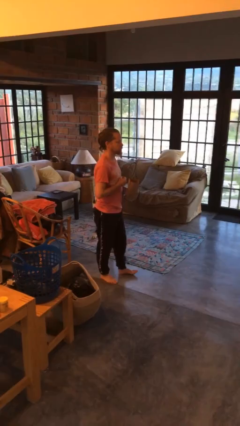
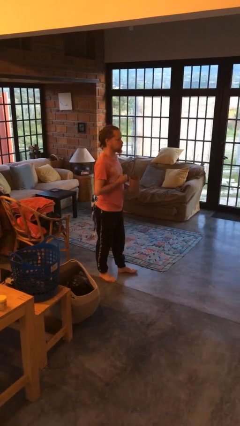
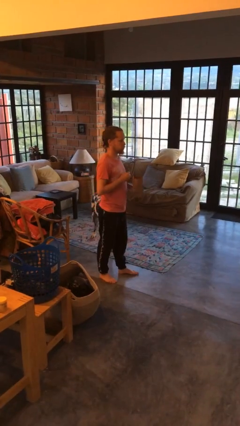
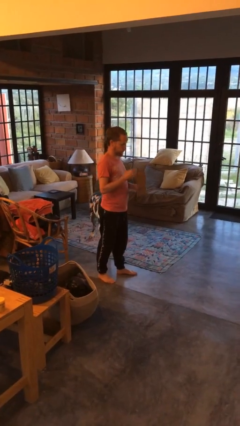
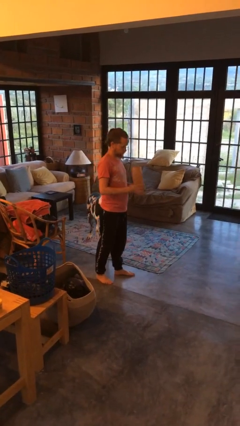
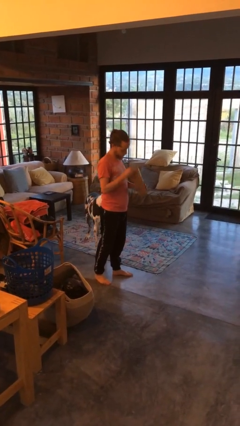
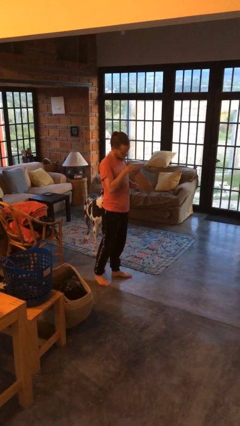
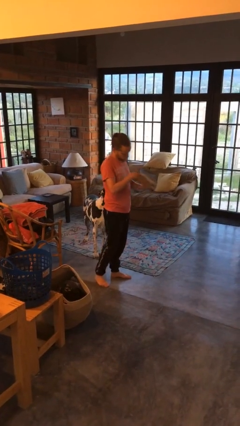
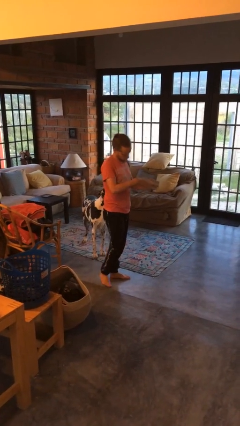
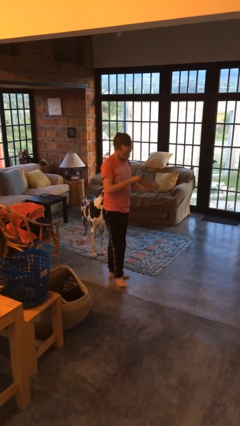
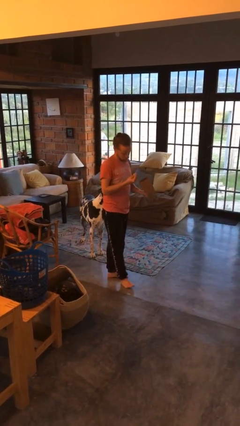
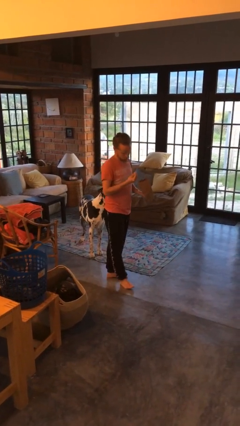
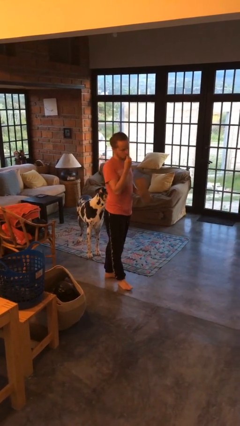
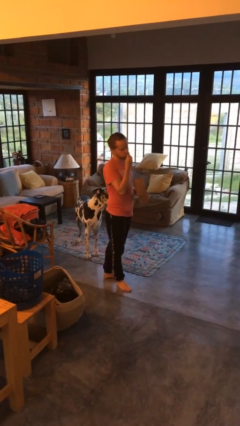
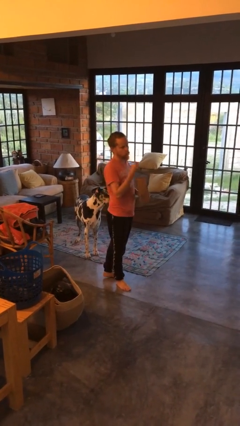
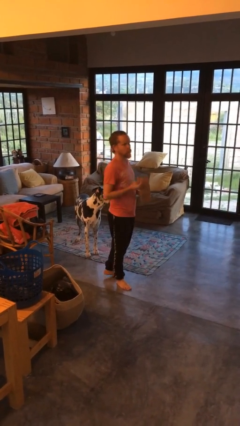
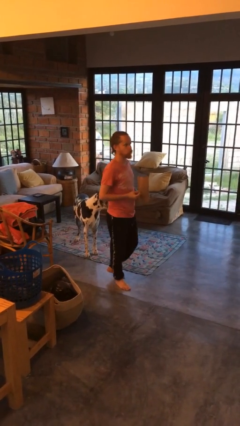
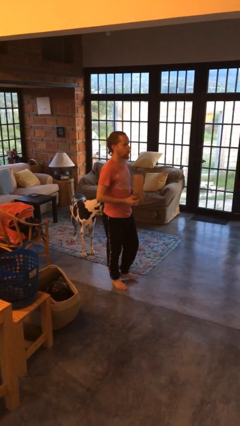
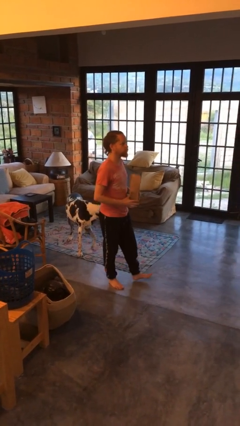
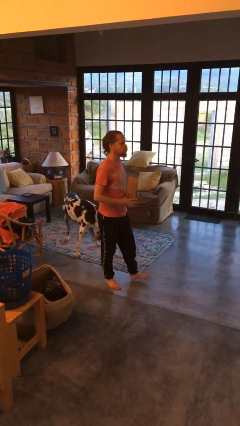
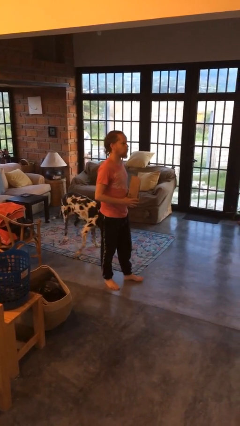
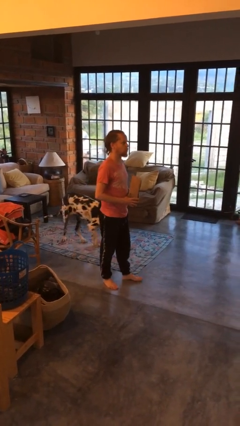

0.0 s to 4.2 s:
person eats snack from bag

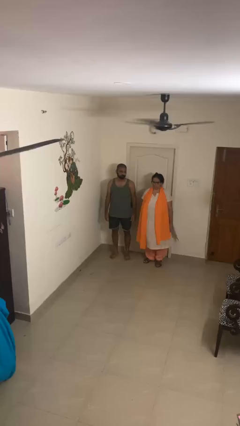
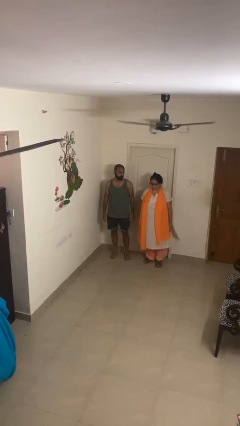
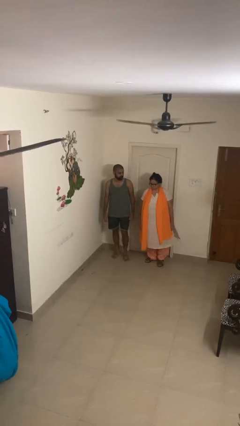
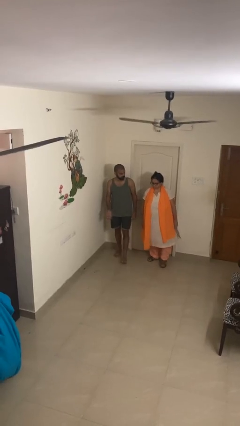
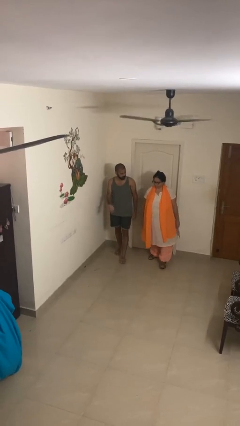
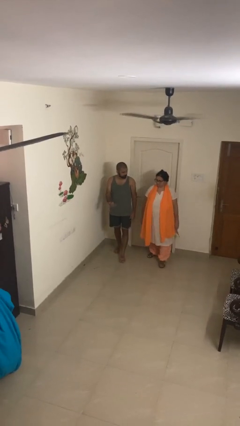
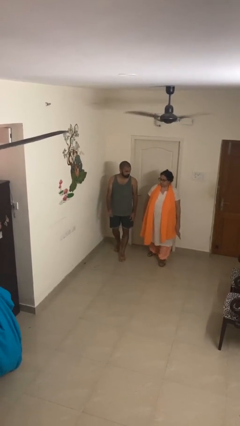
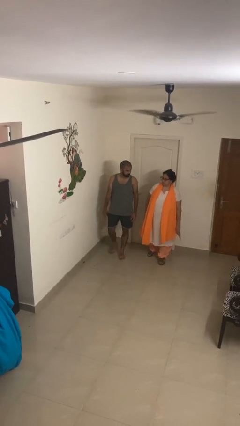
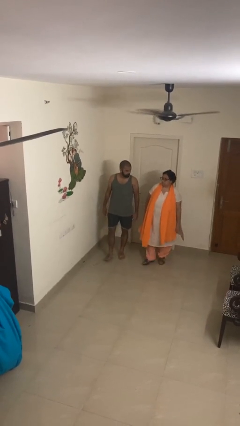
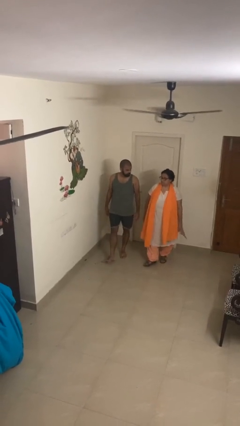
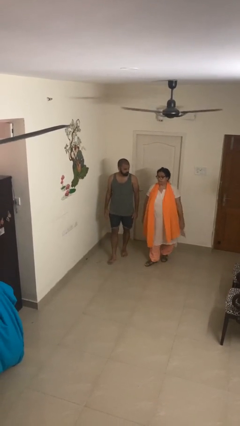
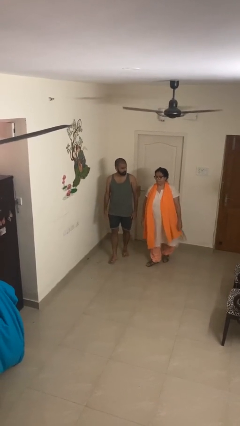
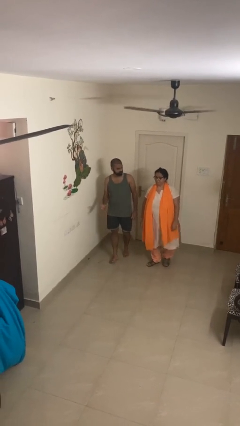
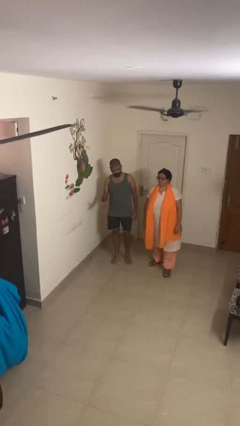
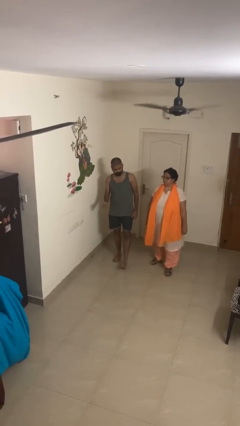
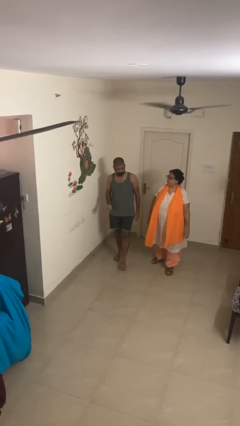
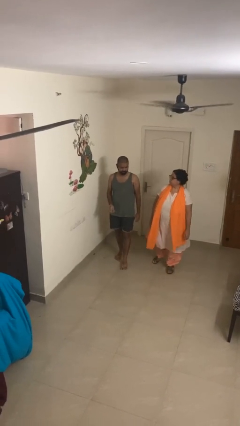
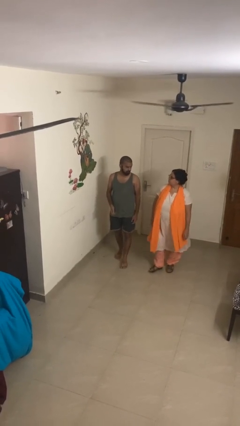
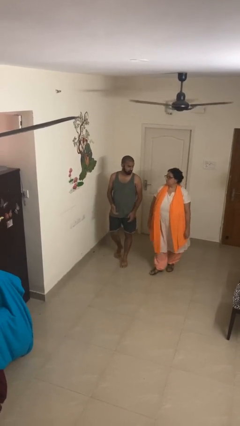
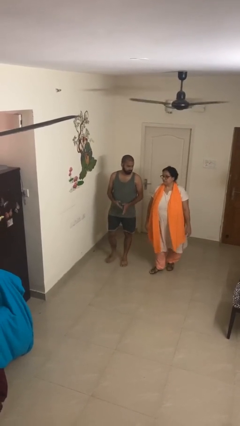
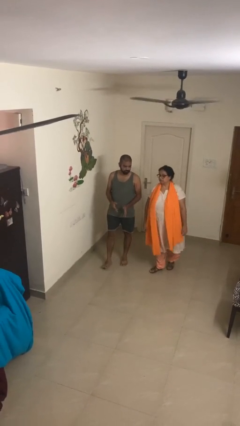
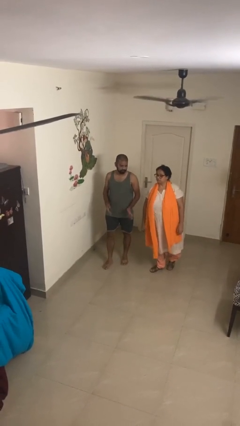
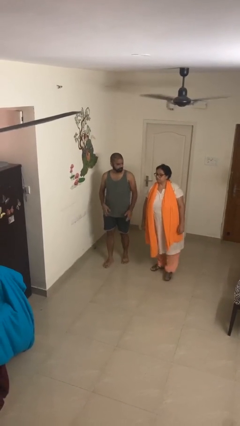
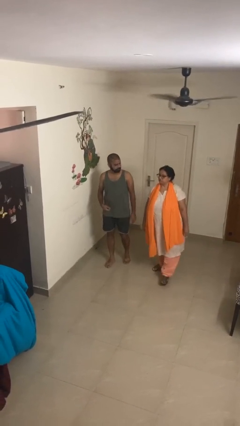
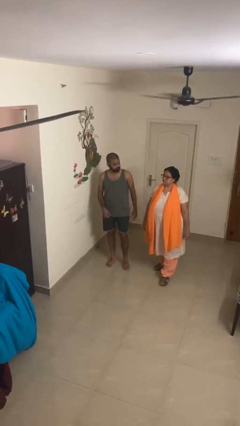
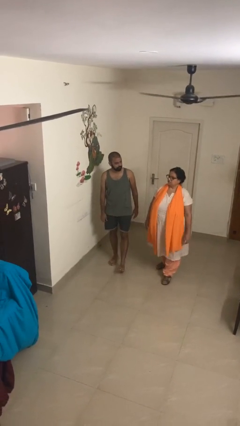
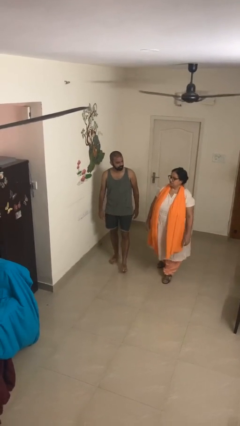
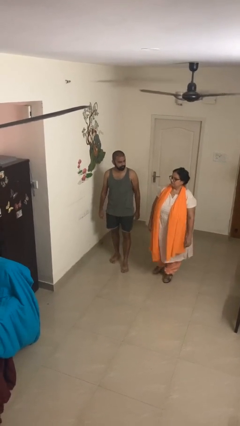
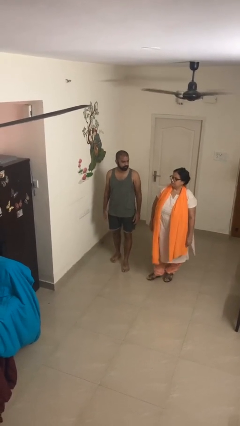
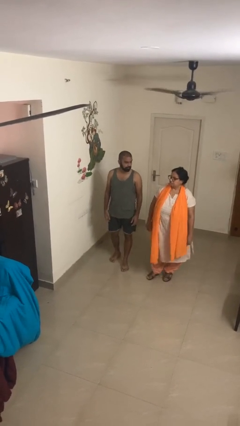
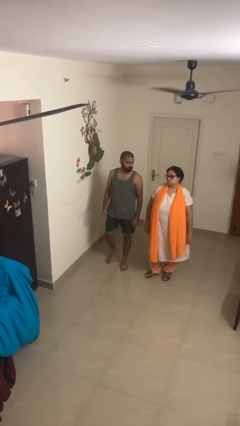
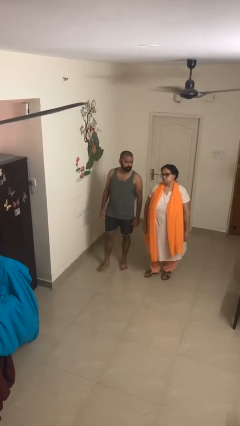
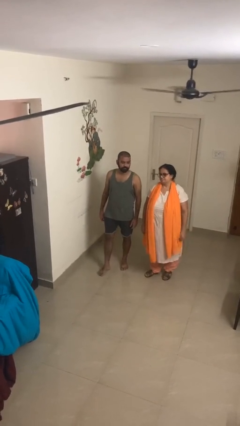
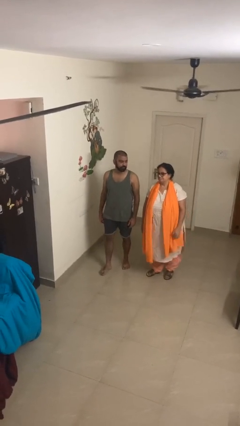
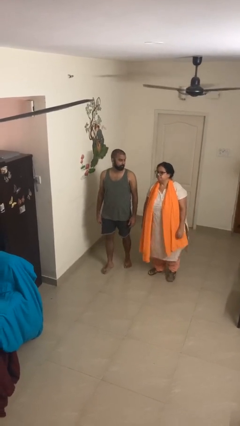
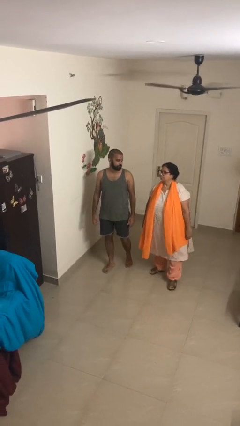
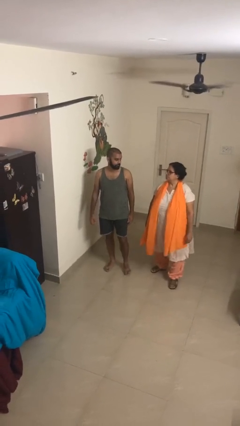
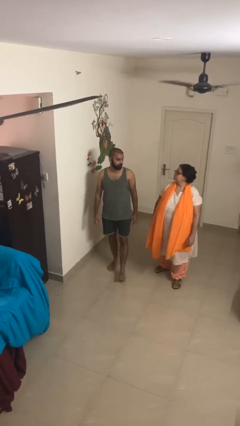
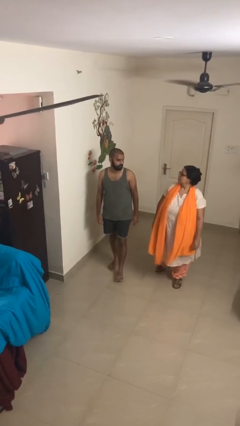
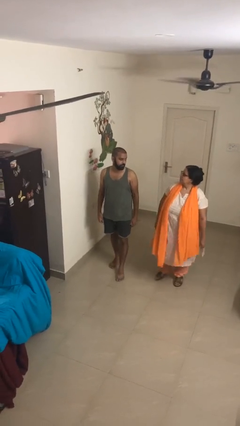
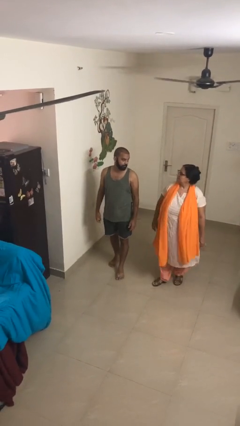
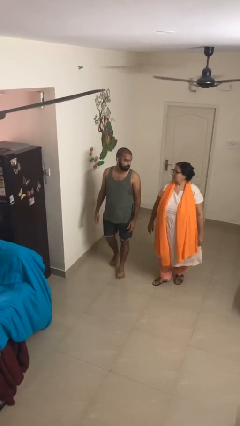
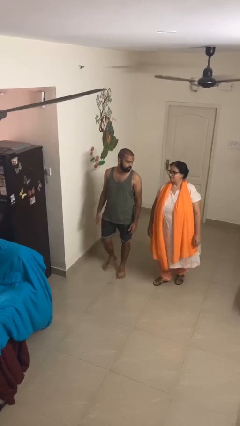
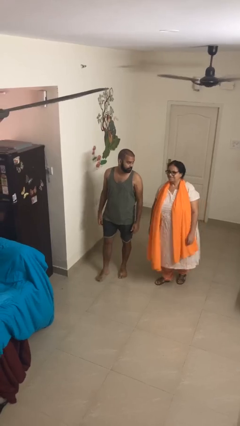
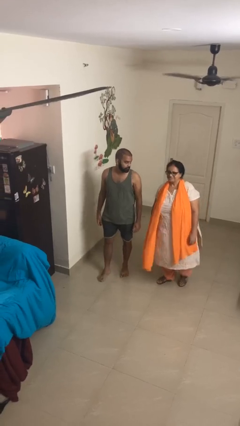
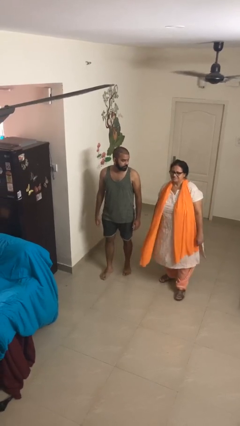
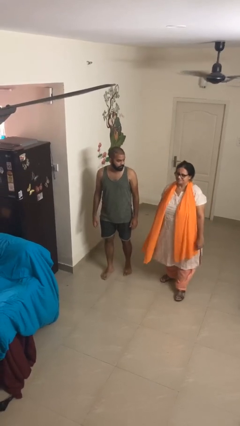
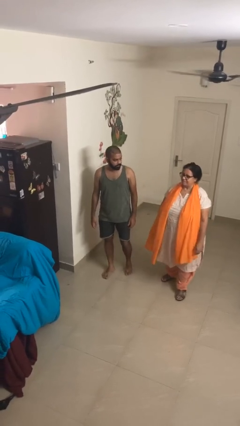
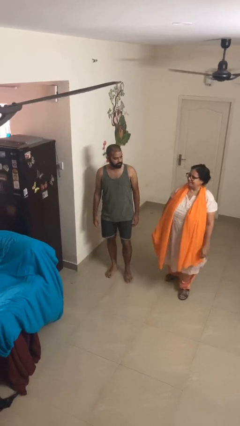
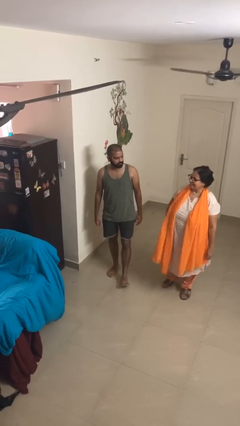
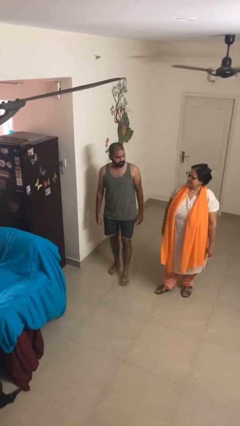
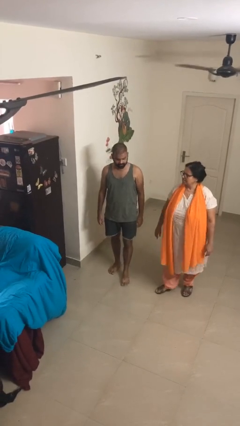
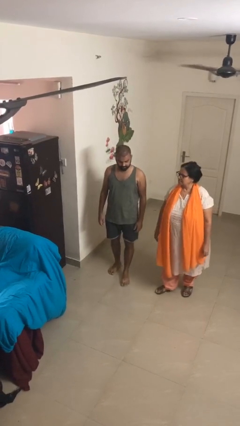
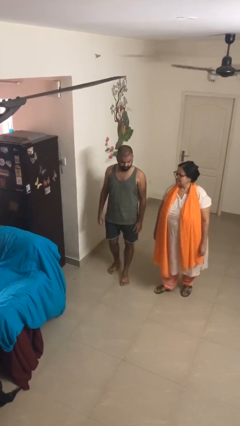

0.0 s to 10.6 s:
person talks to person

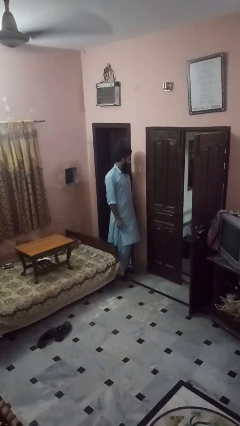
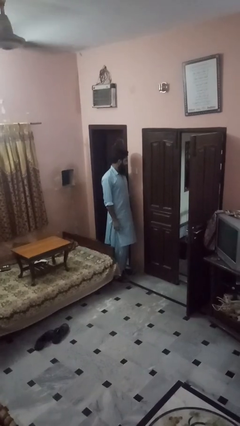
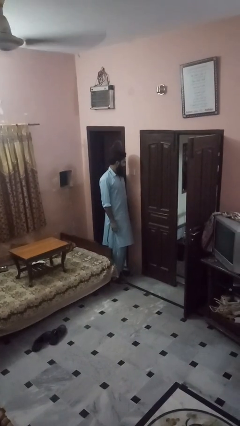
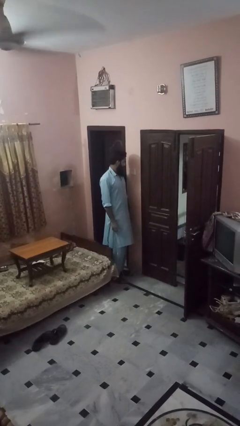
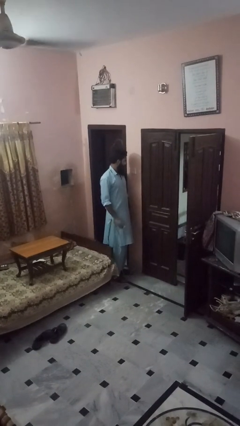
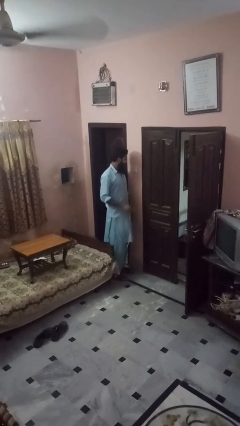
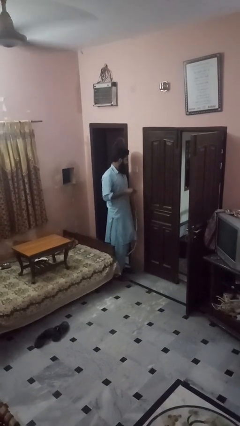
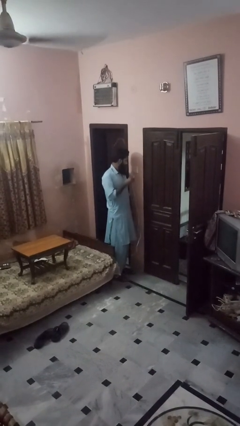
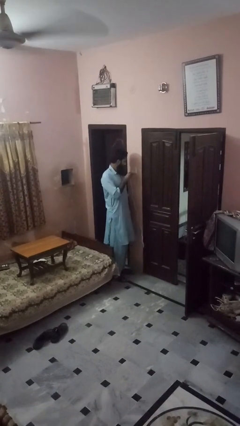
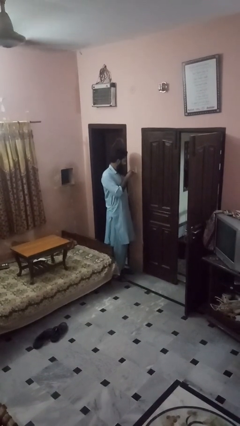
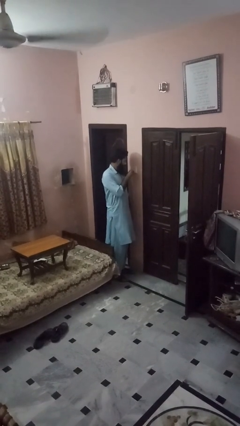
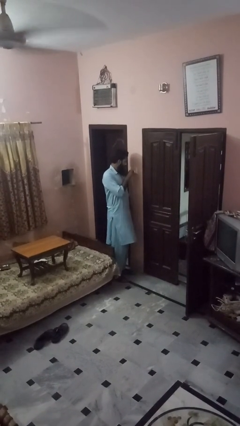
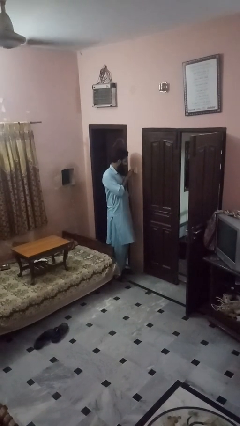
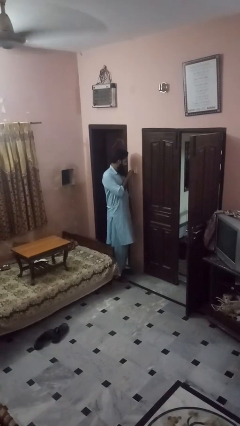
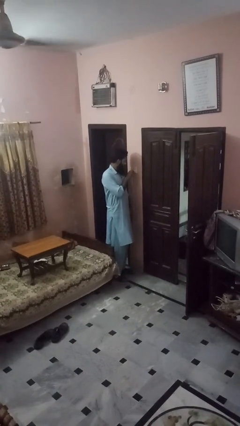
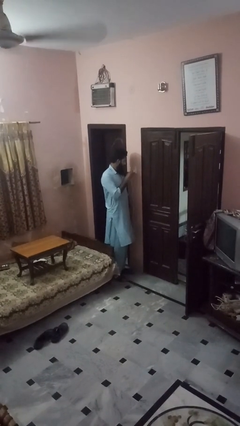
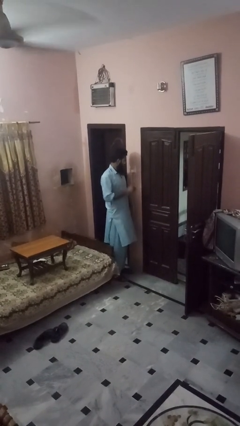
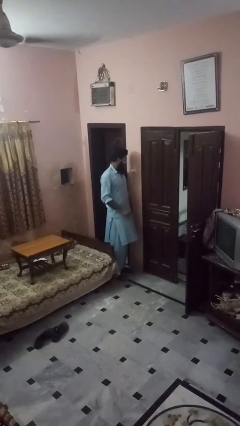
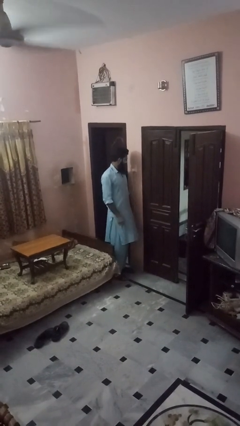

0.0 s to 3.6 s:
person plugs into electrical socket
